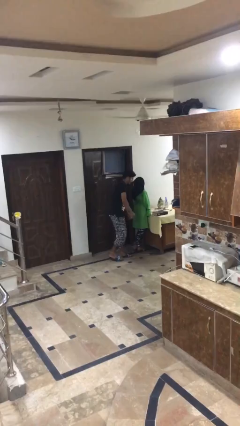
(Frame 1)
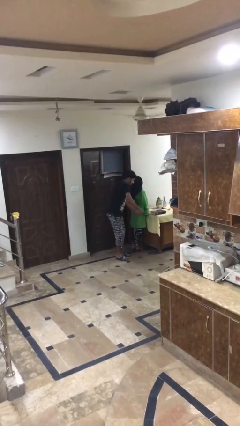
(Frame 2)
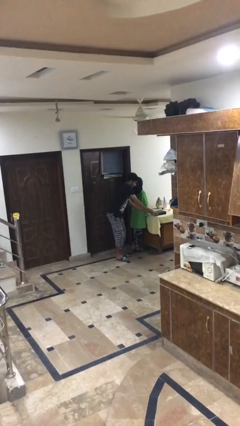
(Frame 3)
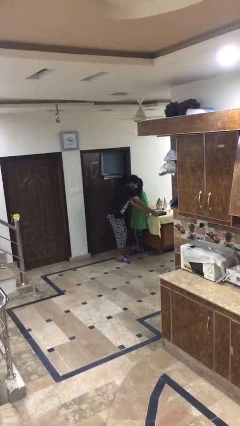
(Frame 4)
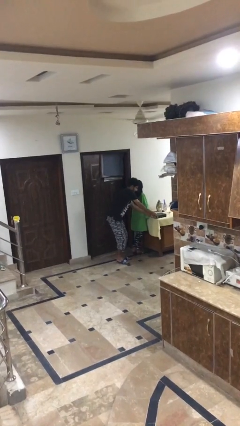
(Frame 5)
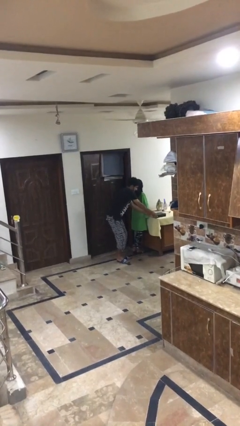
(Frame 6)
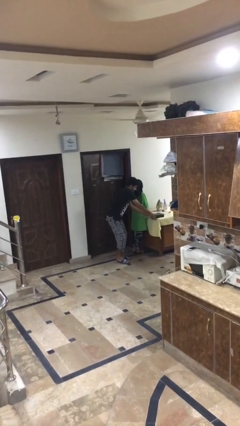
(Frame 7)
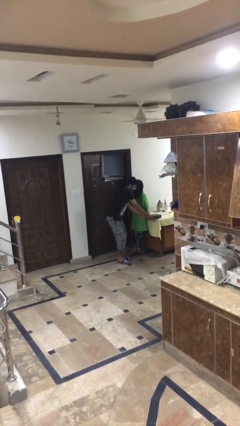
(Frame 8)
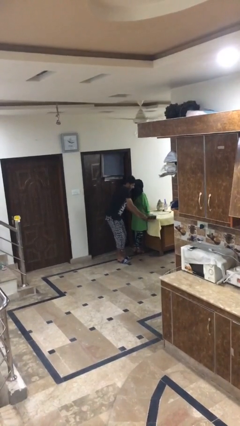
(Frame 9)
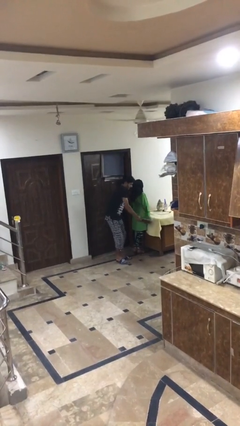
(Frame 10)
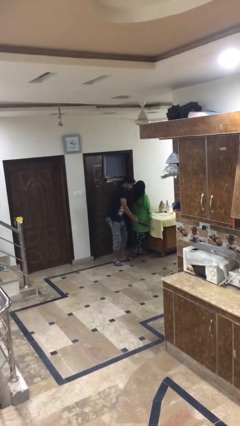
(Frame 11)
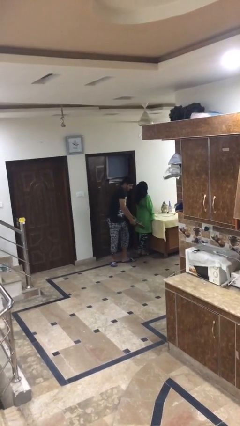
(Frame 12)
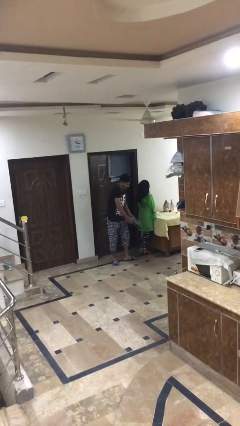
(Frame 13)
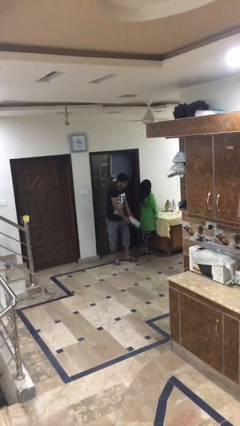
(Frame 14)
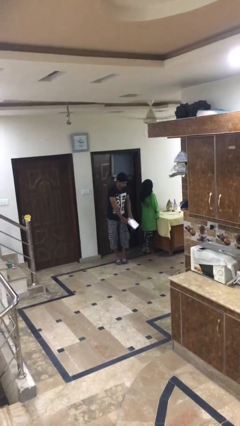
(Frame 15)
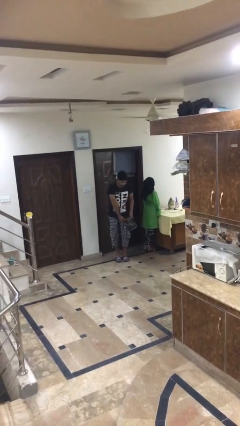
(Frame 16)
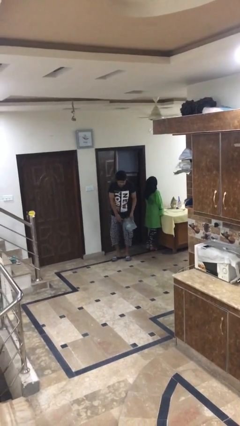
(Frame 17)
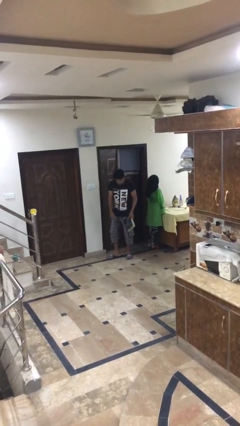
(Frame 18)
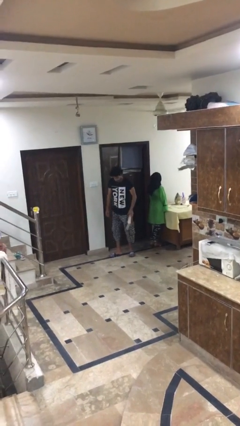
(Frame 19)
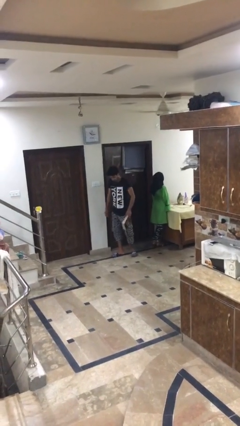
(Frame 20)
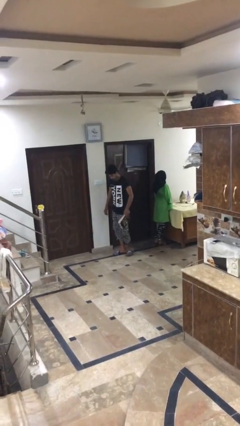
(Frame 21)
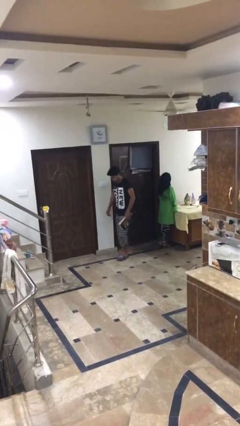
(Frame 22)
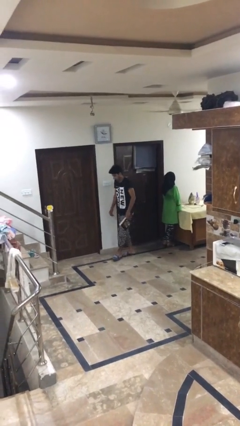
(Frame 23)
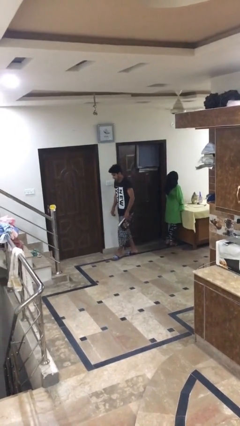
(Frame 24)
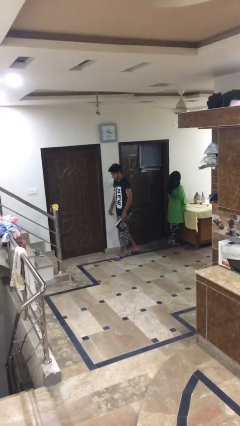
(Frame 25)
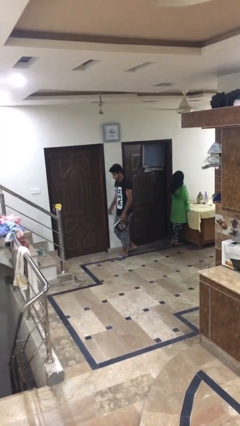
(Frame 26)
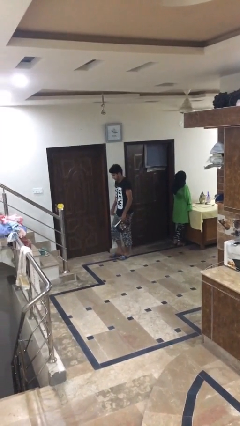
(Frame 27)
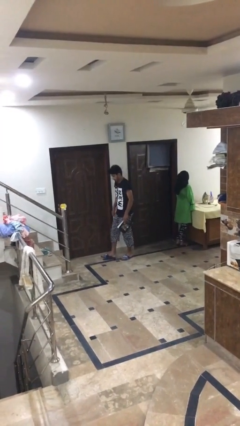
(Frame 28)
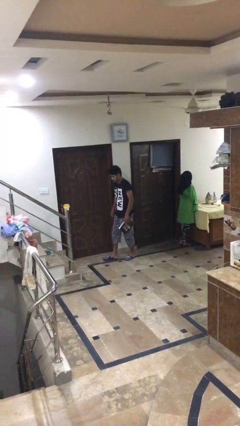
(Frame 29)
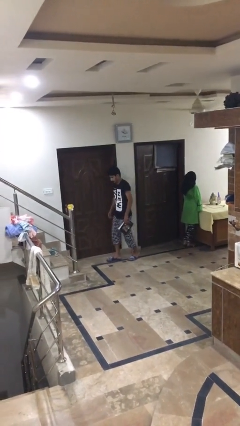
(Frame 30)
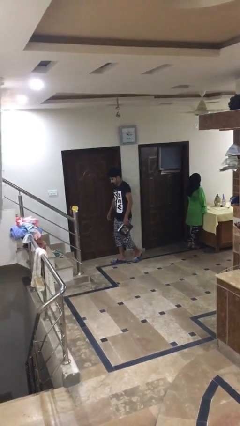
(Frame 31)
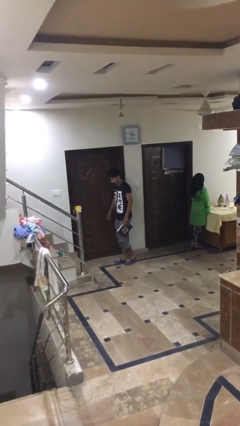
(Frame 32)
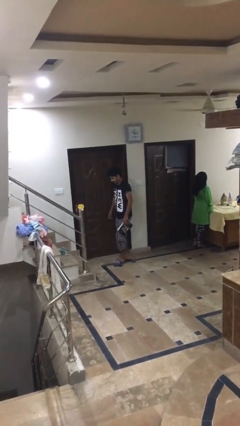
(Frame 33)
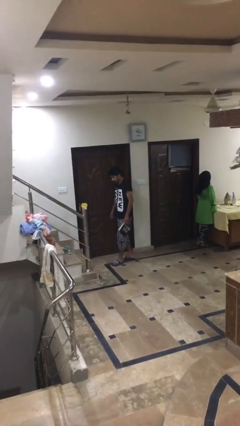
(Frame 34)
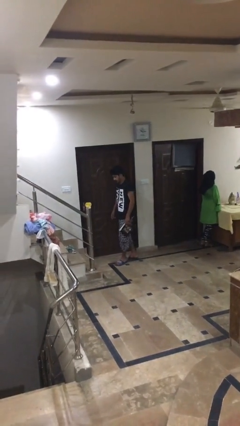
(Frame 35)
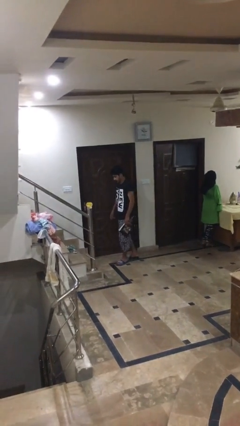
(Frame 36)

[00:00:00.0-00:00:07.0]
person steals object from person

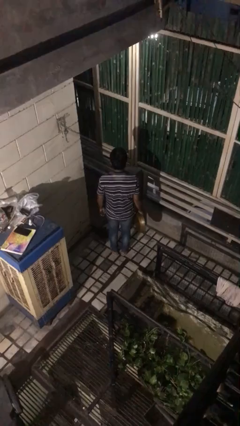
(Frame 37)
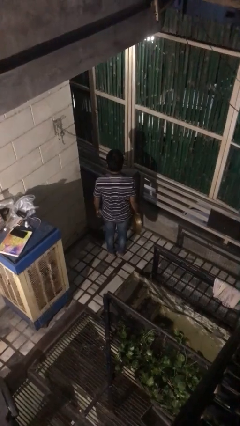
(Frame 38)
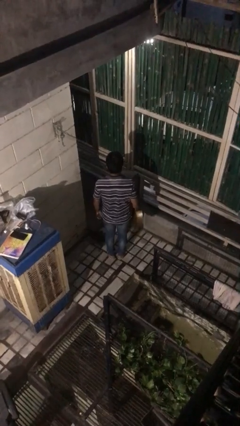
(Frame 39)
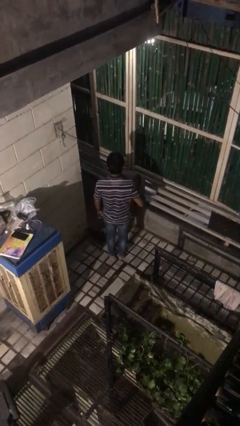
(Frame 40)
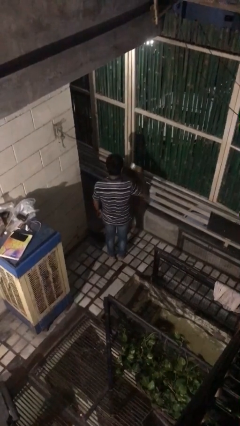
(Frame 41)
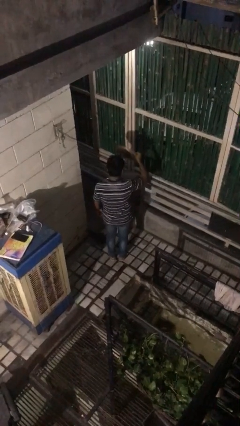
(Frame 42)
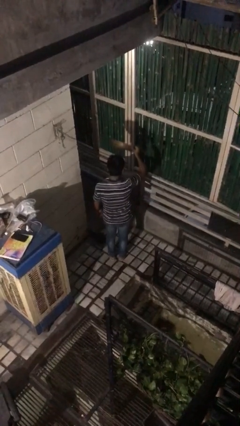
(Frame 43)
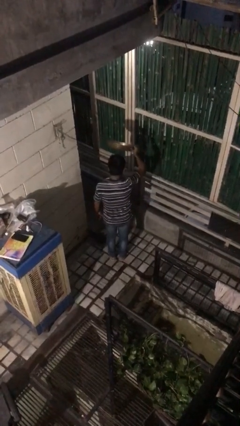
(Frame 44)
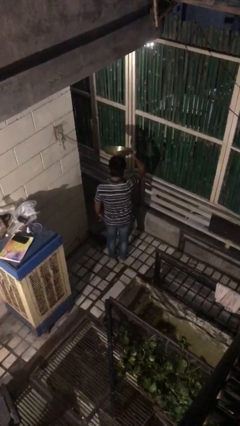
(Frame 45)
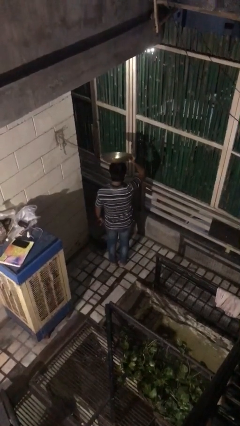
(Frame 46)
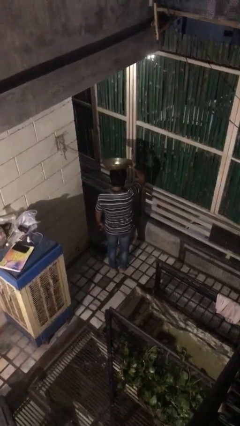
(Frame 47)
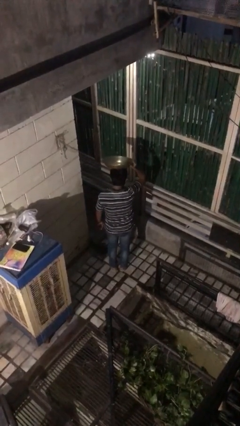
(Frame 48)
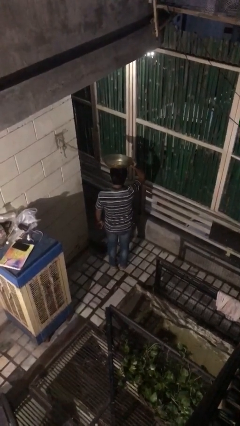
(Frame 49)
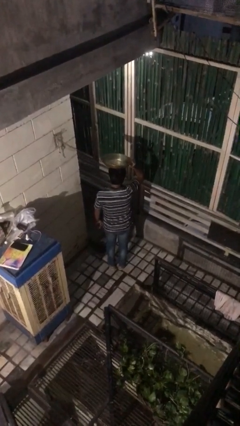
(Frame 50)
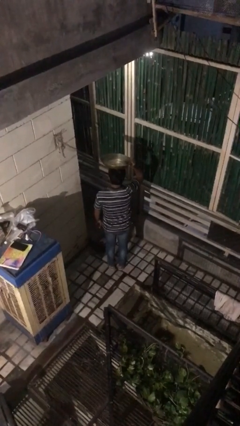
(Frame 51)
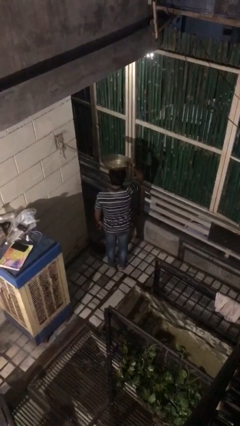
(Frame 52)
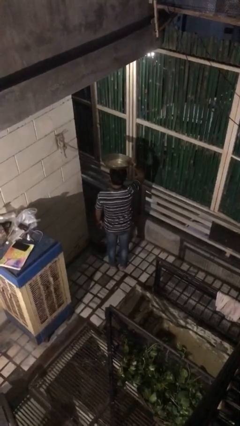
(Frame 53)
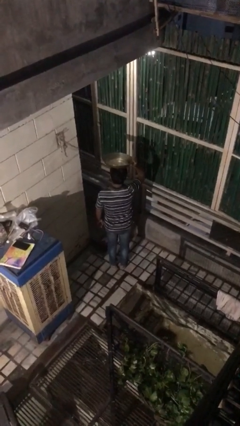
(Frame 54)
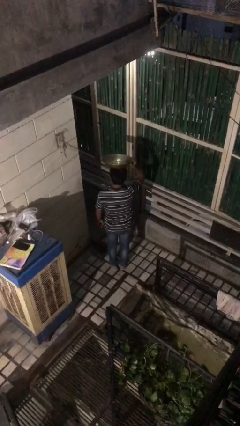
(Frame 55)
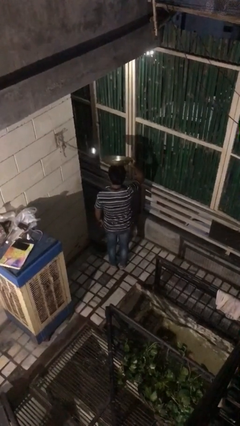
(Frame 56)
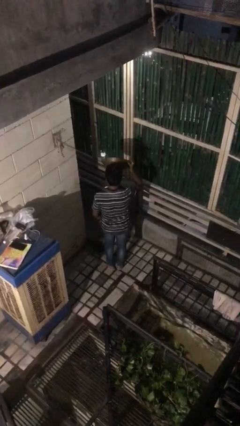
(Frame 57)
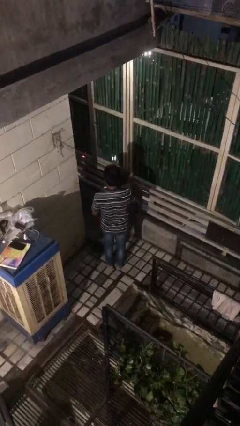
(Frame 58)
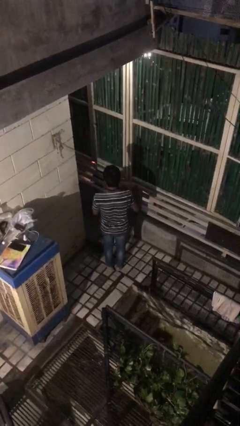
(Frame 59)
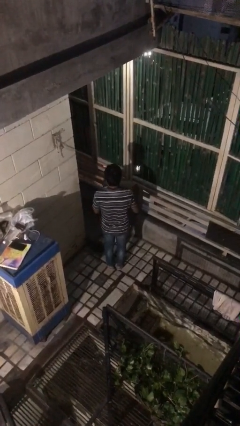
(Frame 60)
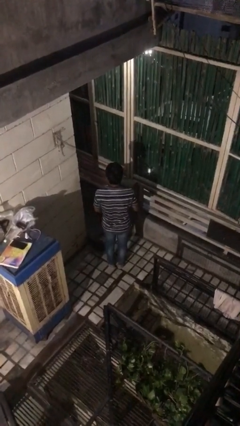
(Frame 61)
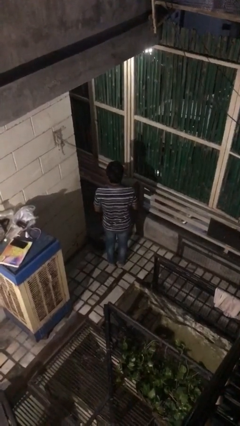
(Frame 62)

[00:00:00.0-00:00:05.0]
person holds object above head

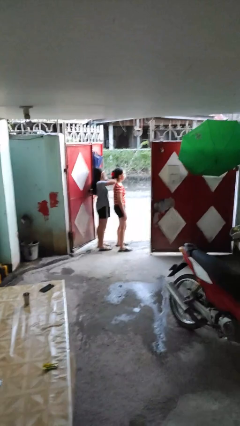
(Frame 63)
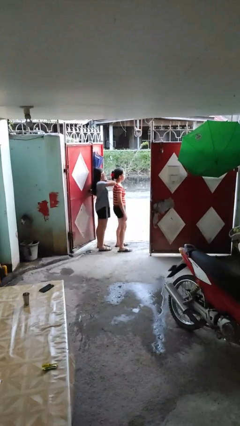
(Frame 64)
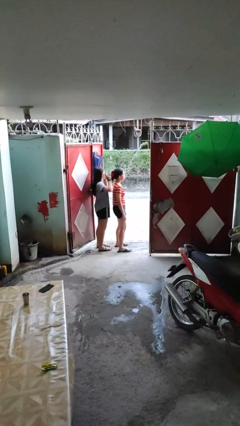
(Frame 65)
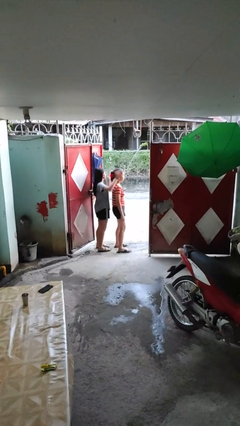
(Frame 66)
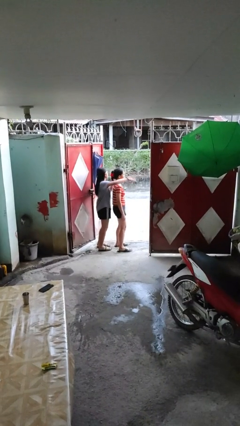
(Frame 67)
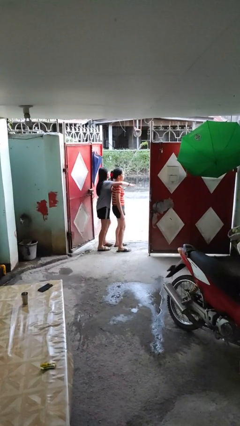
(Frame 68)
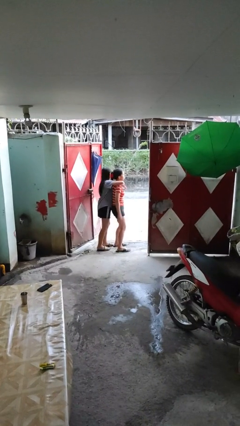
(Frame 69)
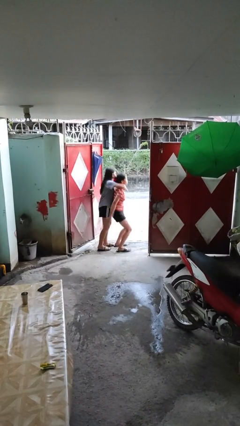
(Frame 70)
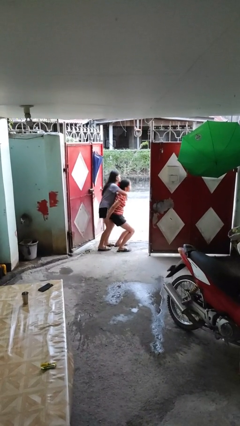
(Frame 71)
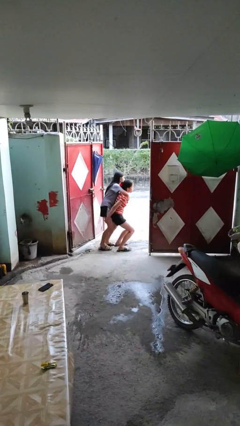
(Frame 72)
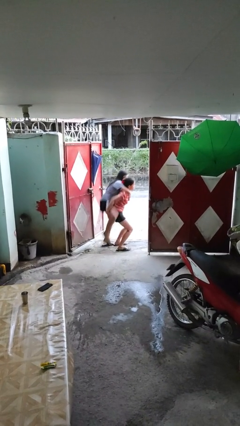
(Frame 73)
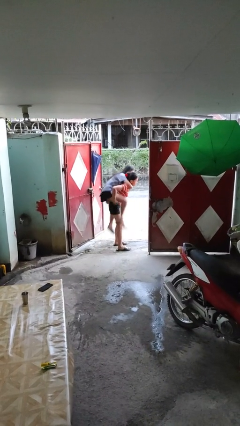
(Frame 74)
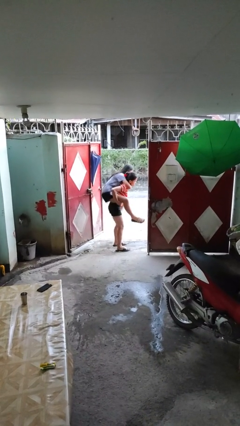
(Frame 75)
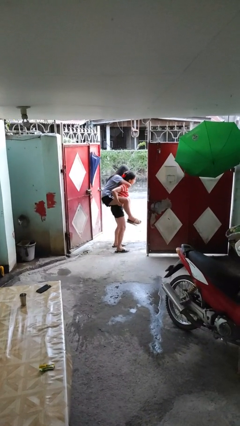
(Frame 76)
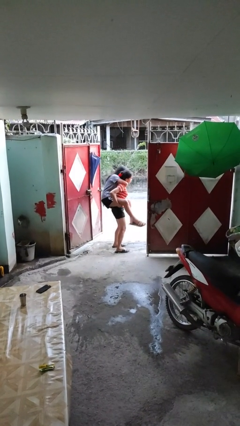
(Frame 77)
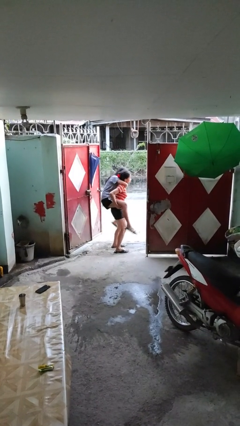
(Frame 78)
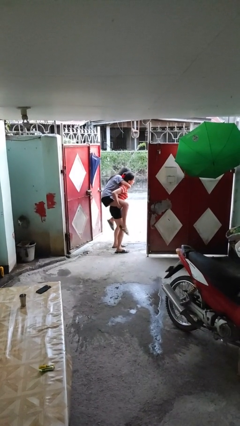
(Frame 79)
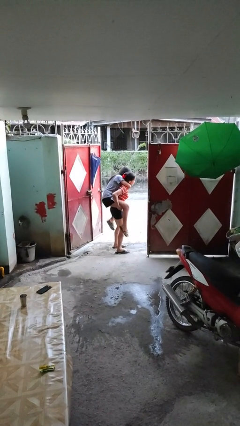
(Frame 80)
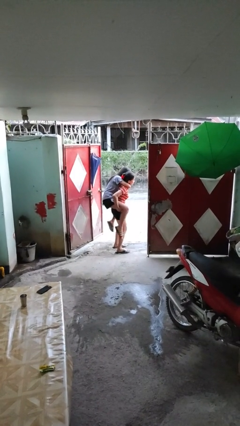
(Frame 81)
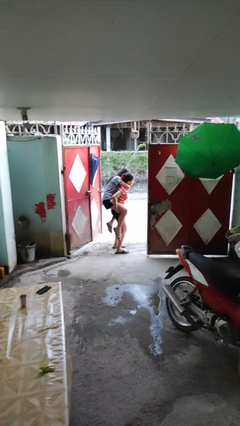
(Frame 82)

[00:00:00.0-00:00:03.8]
person carries person over shoulder

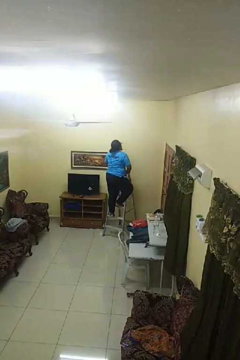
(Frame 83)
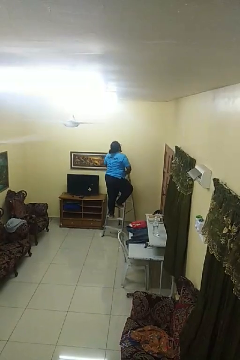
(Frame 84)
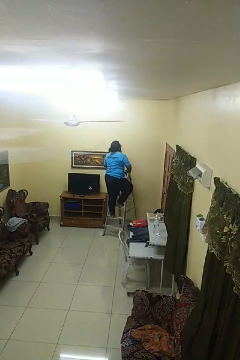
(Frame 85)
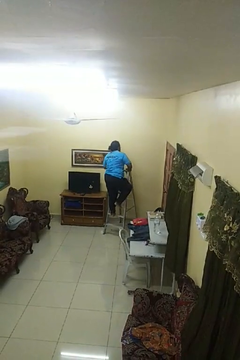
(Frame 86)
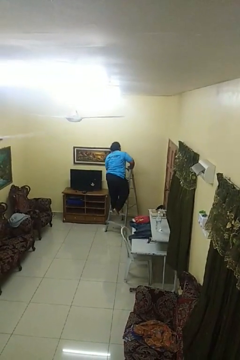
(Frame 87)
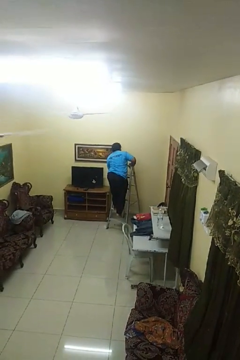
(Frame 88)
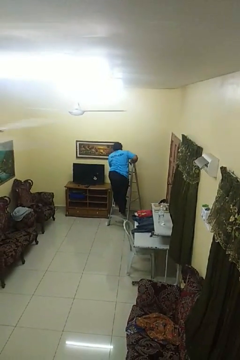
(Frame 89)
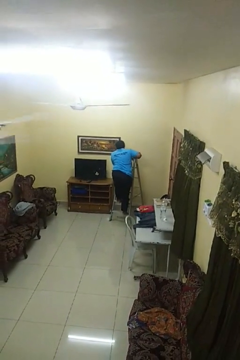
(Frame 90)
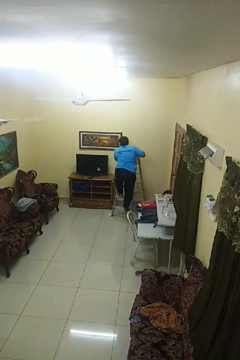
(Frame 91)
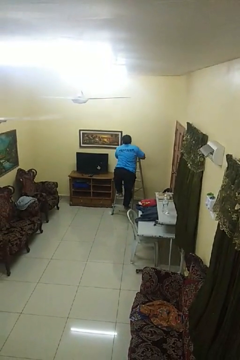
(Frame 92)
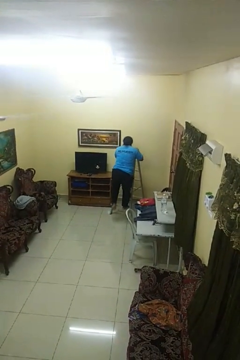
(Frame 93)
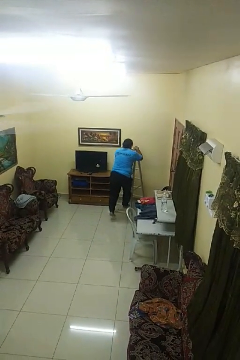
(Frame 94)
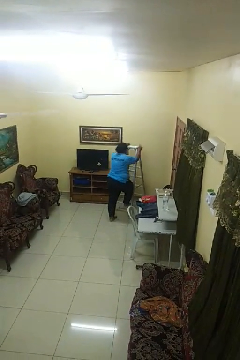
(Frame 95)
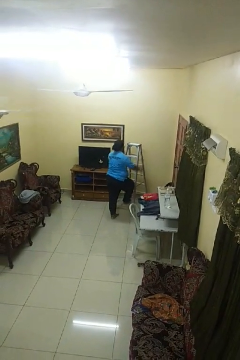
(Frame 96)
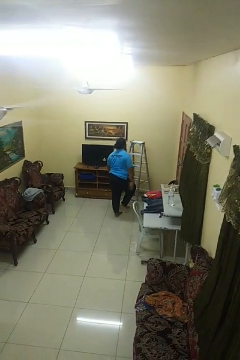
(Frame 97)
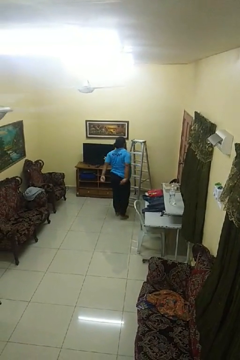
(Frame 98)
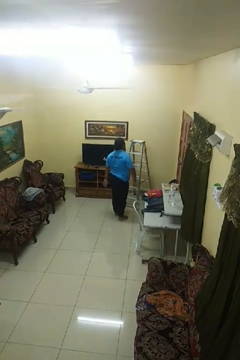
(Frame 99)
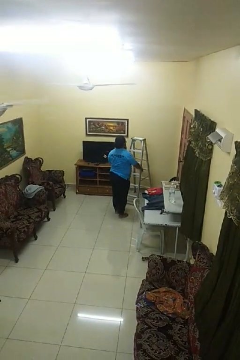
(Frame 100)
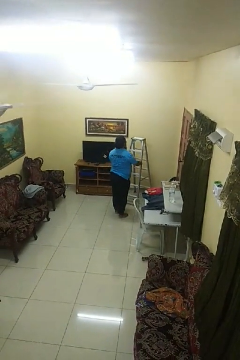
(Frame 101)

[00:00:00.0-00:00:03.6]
person climbs down ladder
